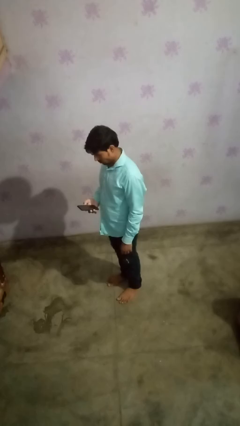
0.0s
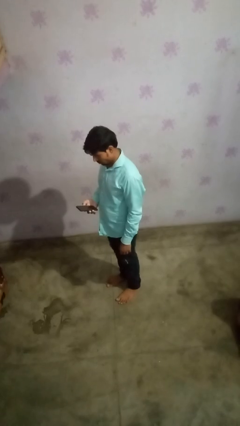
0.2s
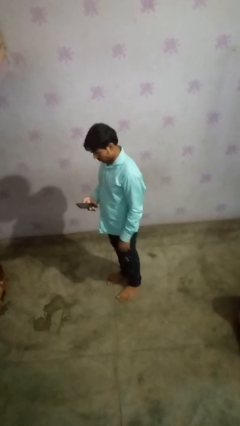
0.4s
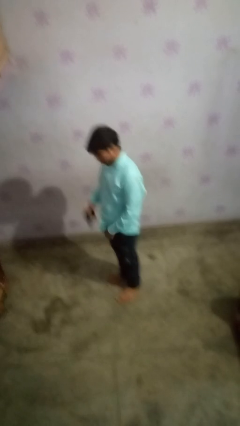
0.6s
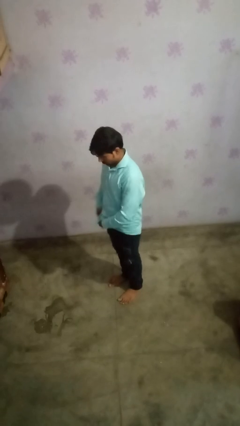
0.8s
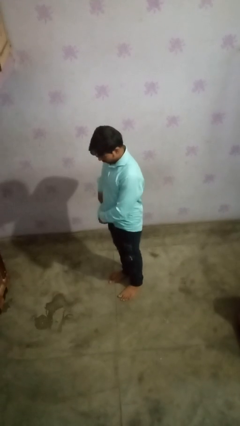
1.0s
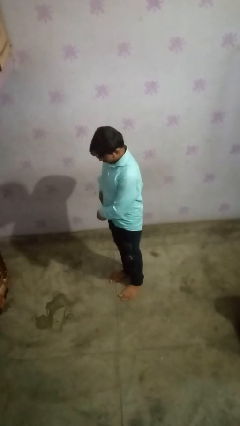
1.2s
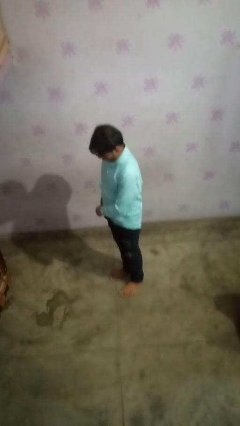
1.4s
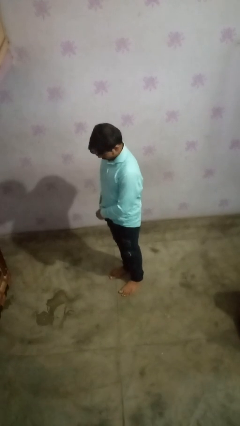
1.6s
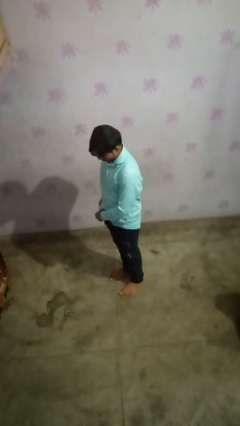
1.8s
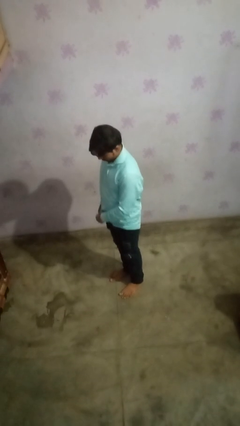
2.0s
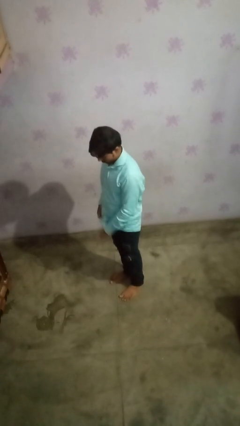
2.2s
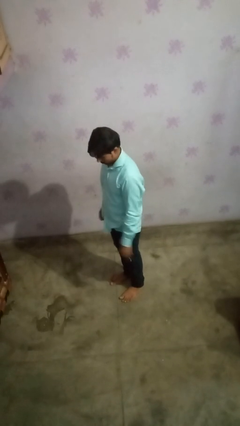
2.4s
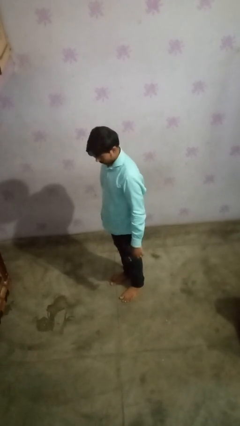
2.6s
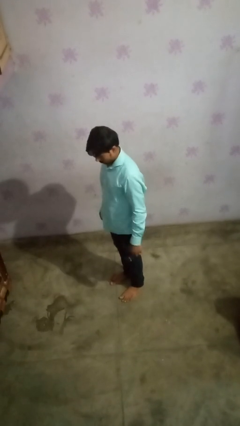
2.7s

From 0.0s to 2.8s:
person puts phone into pocket

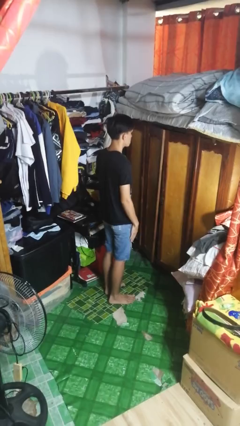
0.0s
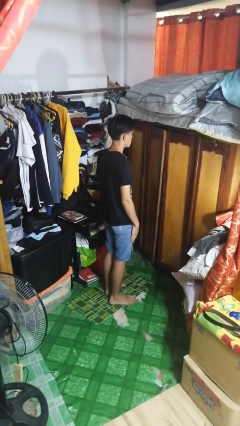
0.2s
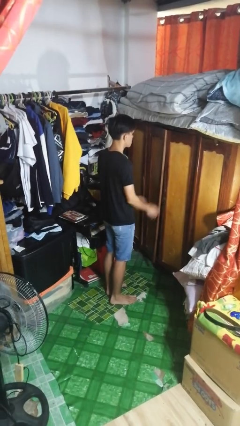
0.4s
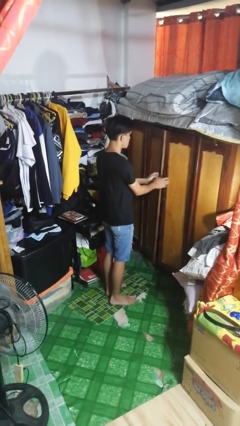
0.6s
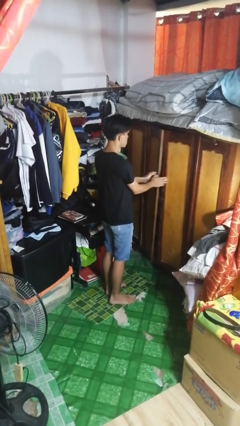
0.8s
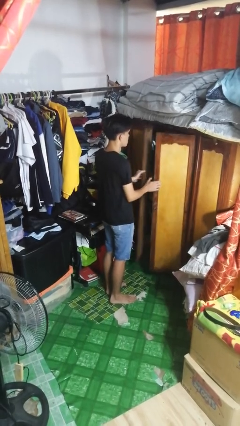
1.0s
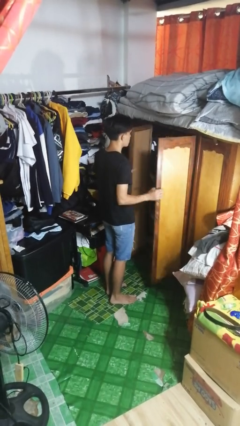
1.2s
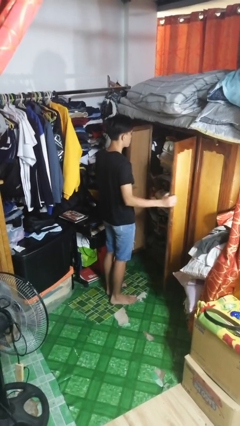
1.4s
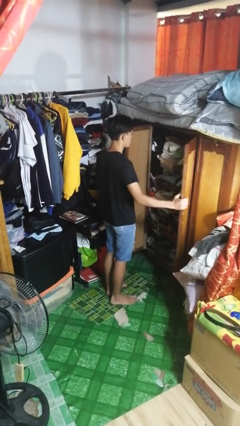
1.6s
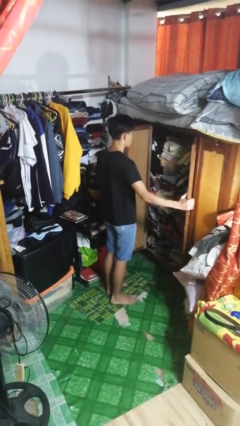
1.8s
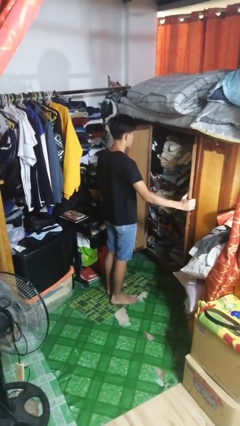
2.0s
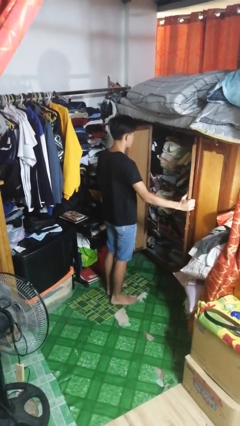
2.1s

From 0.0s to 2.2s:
person opens closet door

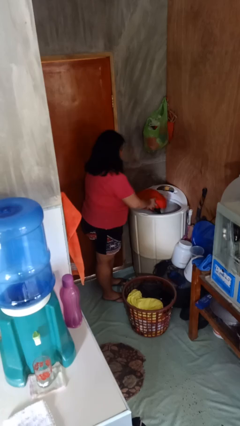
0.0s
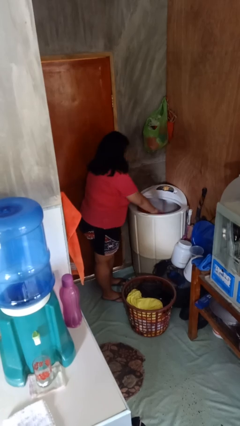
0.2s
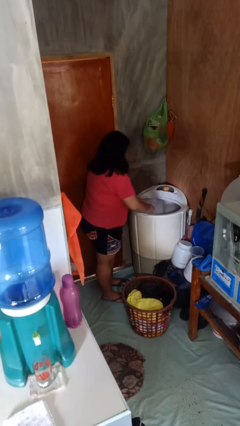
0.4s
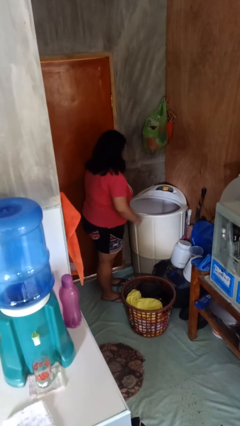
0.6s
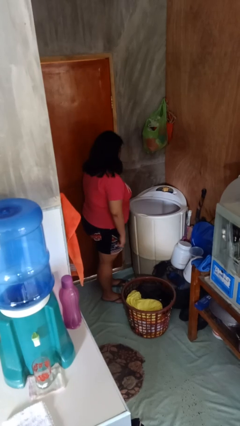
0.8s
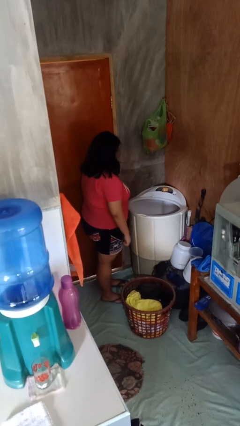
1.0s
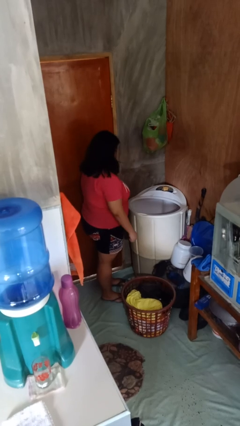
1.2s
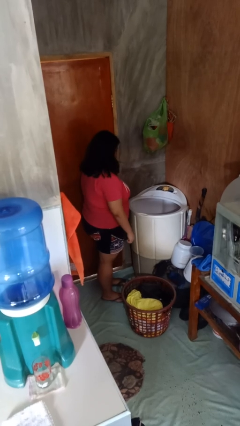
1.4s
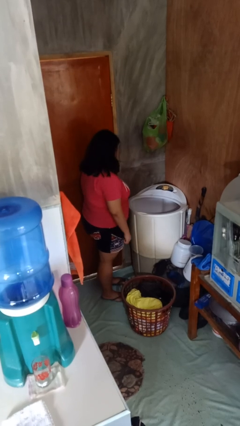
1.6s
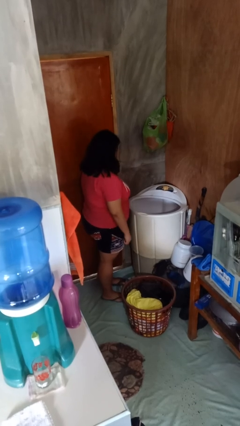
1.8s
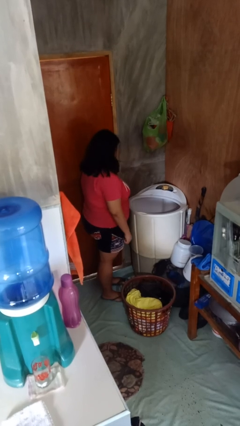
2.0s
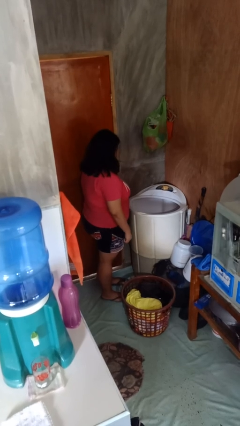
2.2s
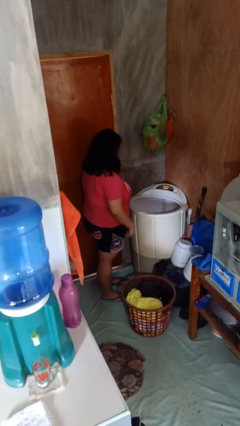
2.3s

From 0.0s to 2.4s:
person loads dryer

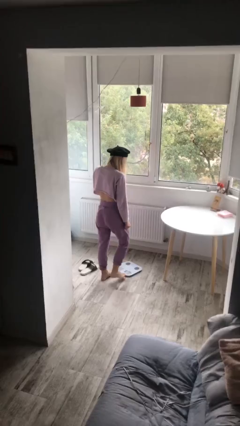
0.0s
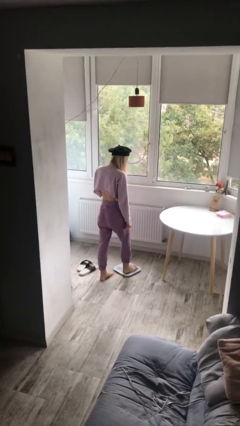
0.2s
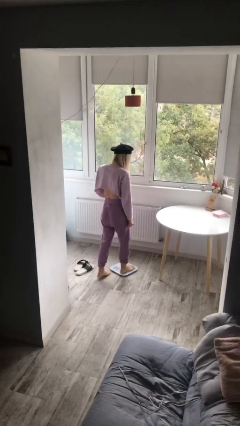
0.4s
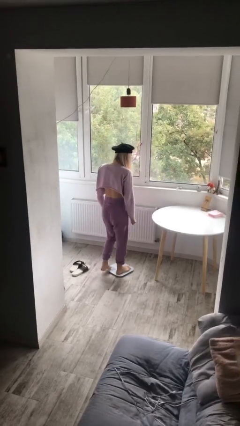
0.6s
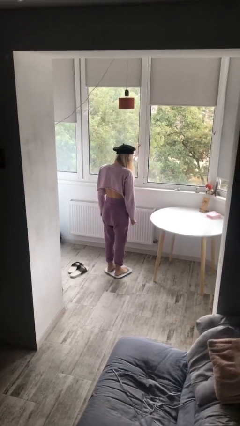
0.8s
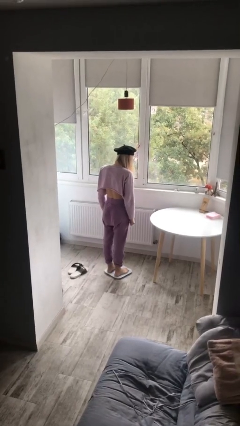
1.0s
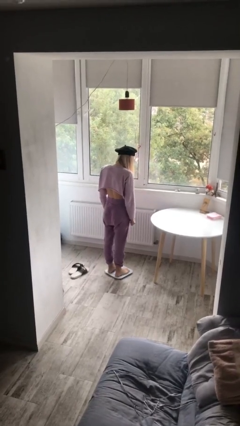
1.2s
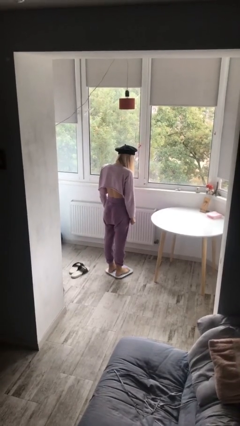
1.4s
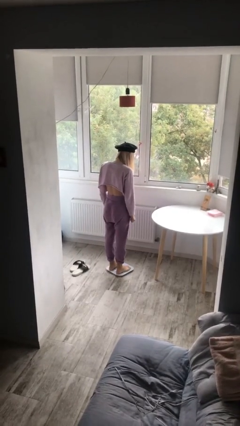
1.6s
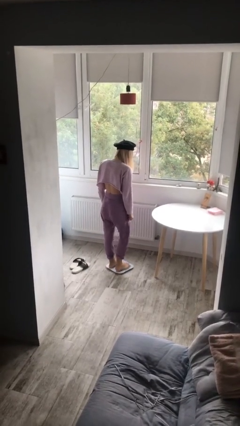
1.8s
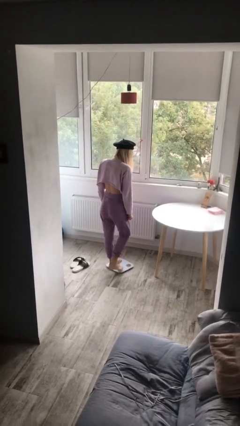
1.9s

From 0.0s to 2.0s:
person uses bodyweight scale

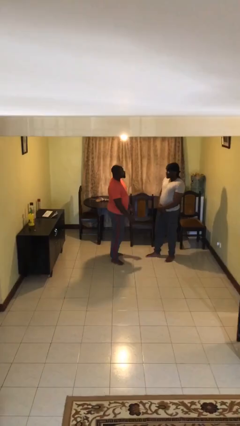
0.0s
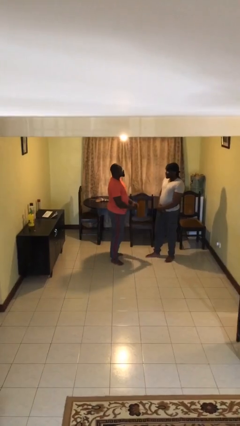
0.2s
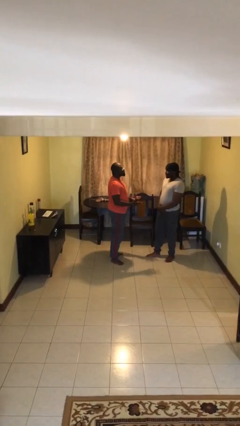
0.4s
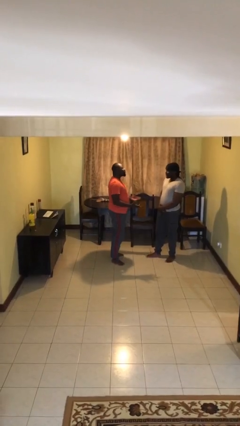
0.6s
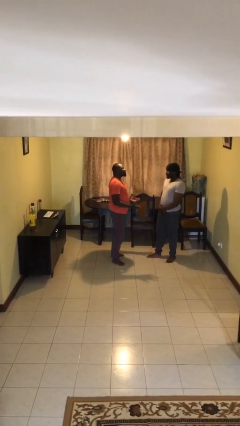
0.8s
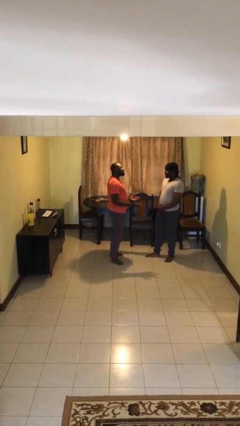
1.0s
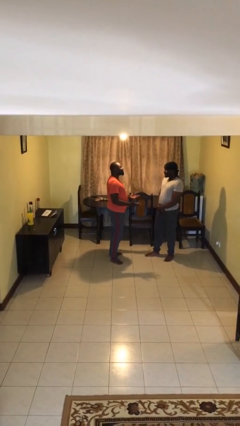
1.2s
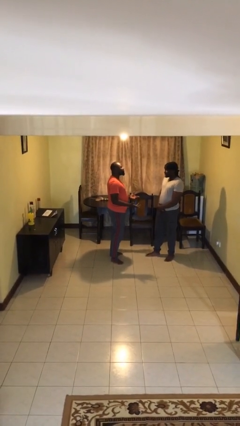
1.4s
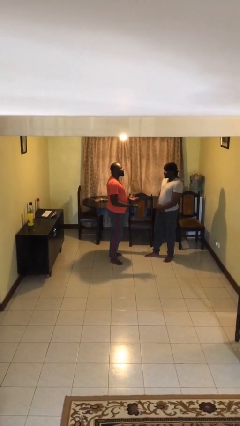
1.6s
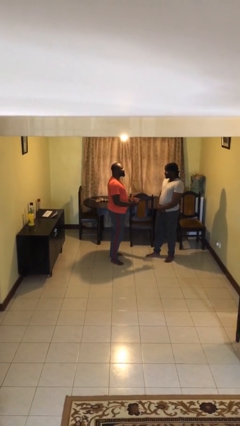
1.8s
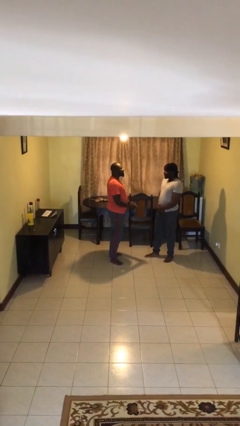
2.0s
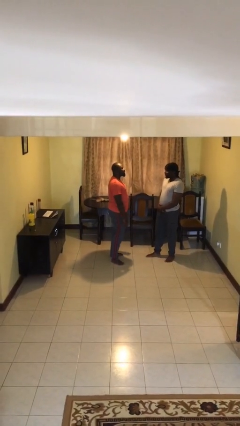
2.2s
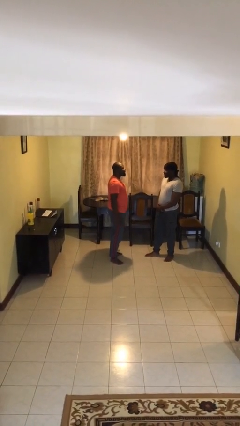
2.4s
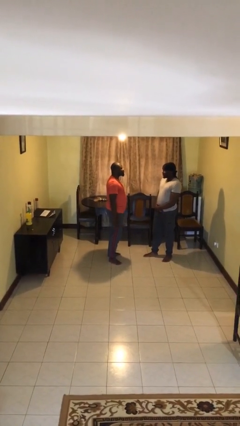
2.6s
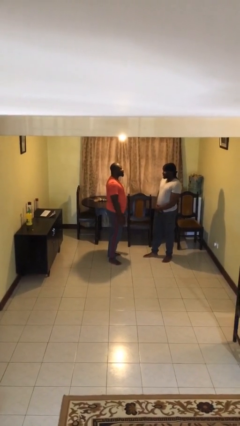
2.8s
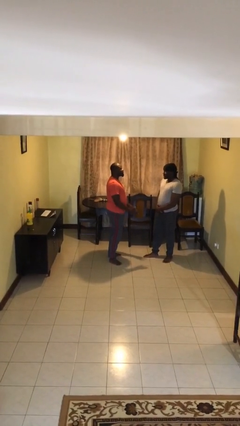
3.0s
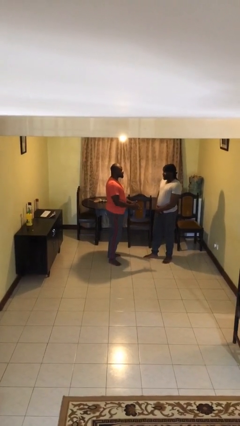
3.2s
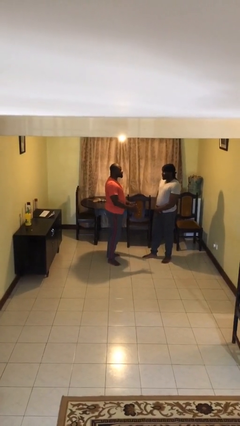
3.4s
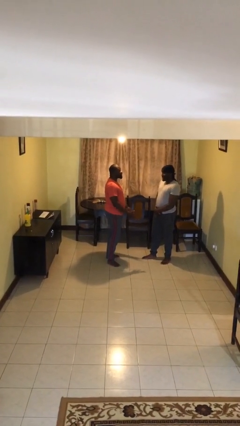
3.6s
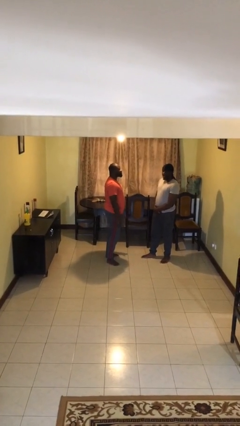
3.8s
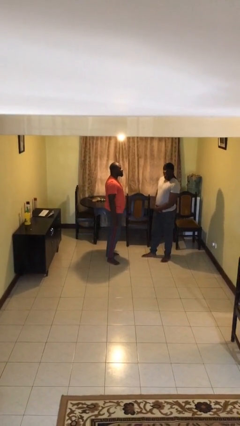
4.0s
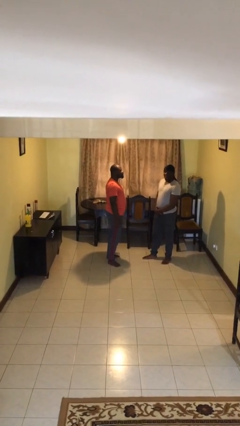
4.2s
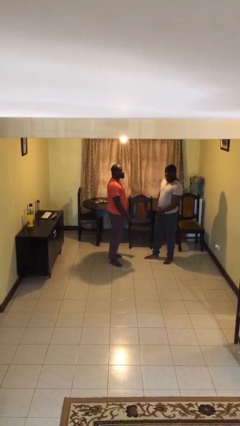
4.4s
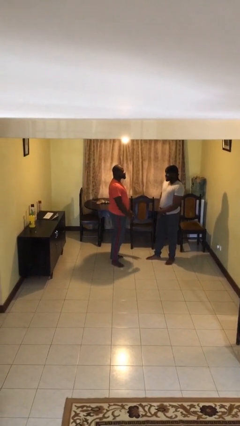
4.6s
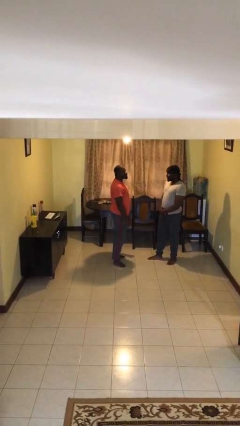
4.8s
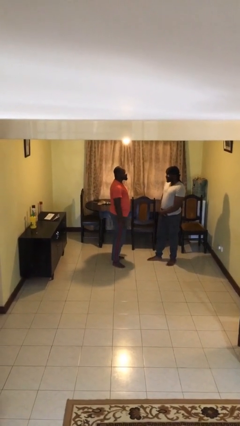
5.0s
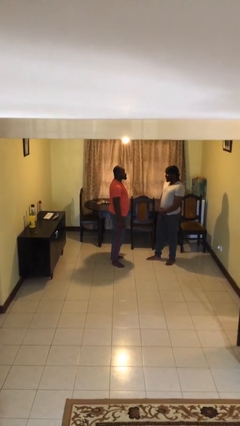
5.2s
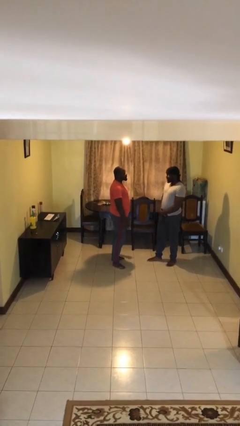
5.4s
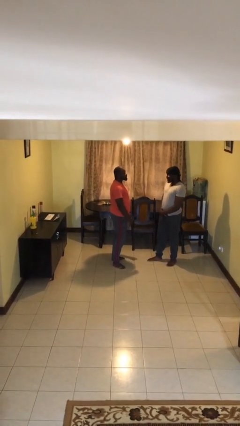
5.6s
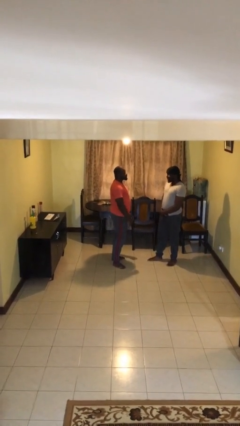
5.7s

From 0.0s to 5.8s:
person talks to person

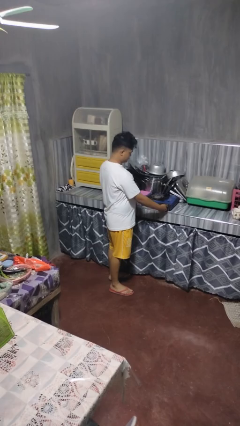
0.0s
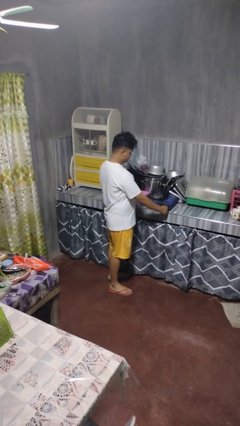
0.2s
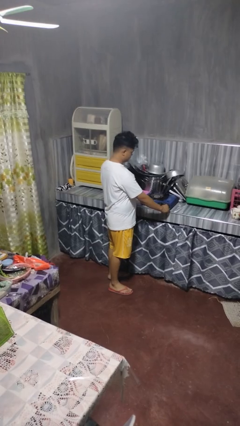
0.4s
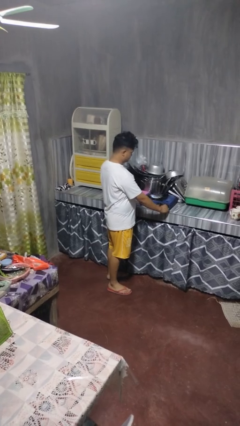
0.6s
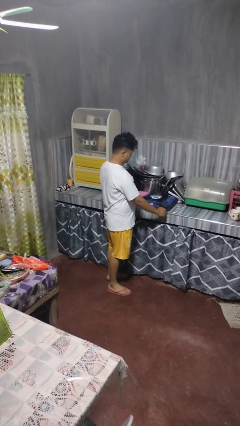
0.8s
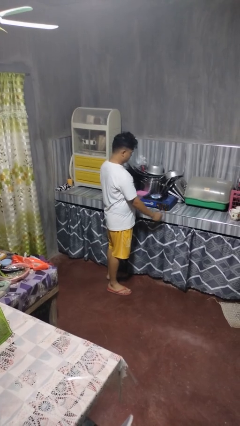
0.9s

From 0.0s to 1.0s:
person turns on stovetop

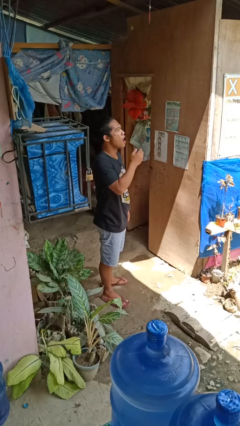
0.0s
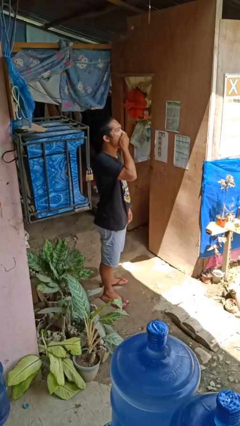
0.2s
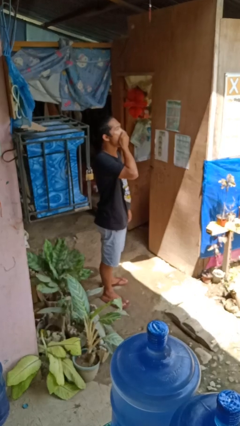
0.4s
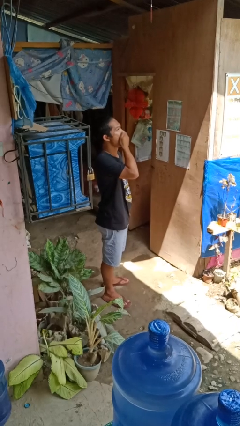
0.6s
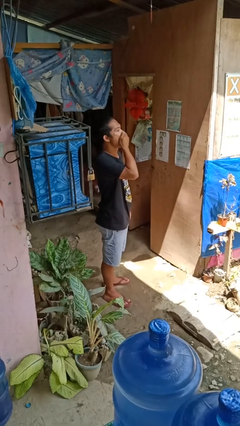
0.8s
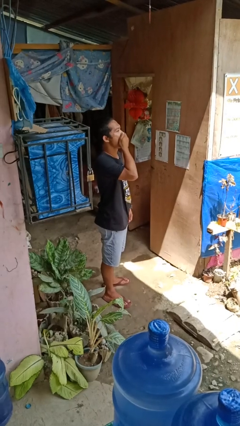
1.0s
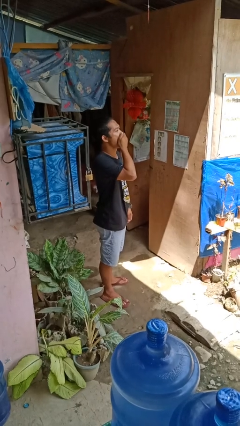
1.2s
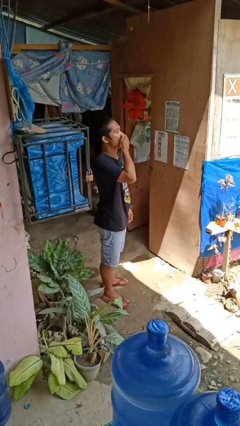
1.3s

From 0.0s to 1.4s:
person yawns
